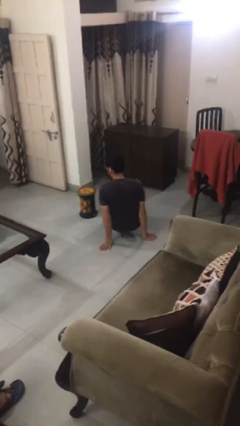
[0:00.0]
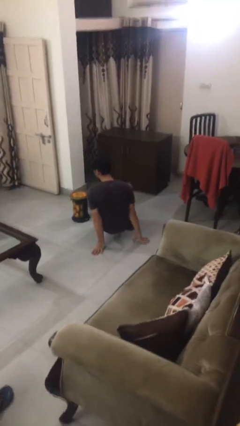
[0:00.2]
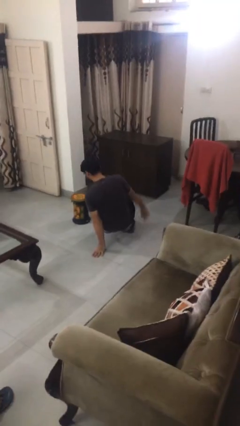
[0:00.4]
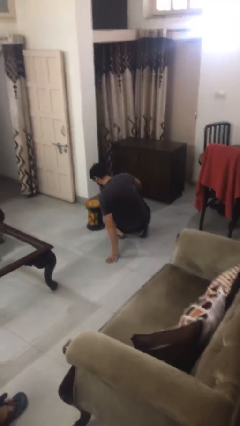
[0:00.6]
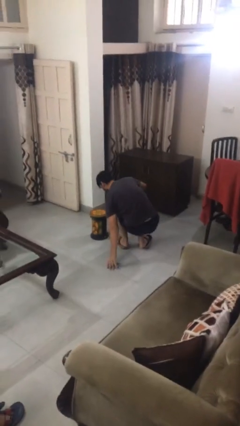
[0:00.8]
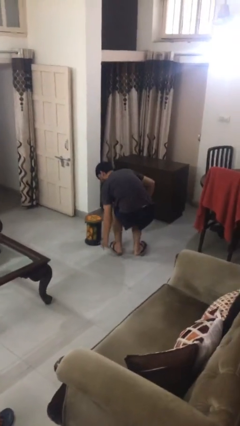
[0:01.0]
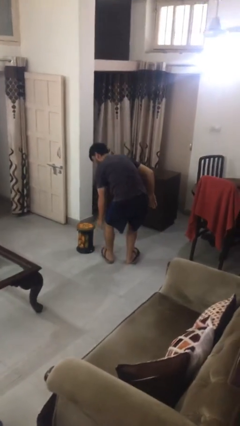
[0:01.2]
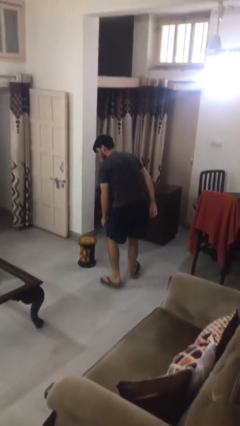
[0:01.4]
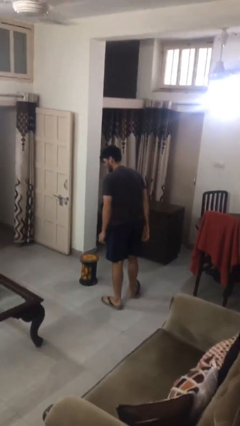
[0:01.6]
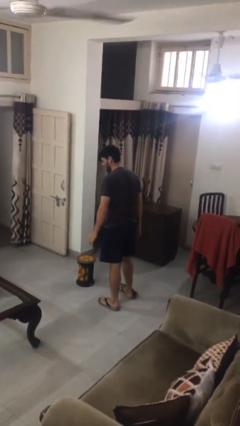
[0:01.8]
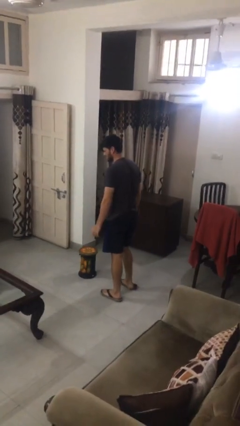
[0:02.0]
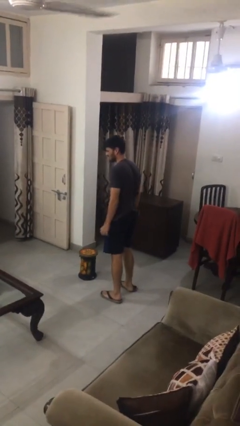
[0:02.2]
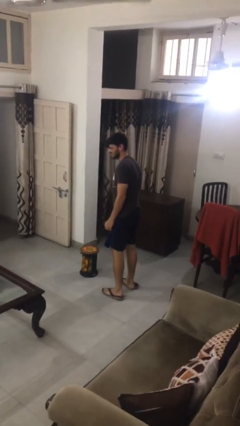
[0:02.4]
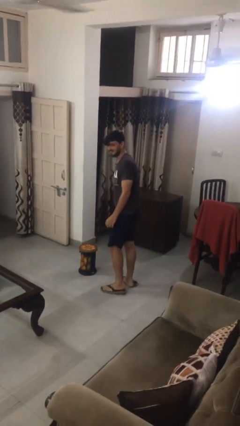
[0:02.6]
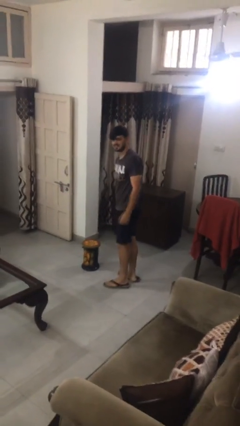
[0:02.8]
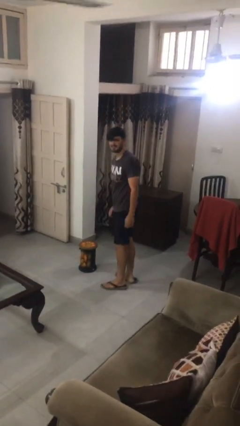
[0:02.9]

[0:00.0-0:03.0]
person stands up from floor

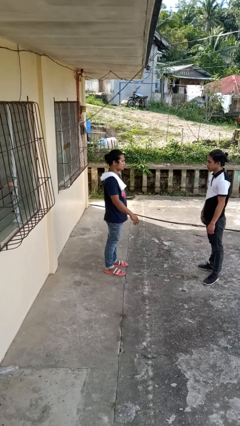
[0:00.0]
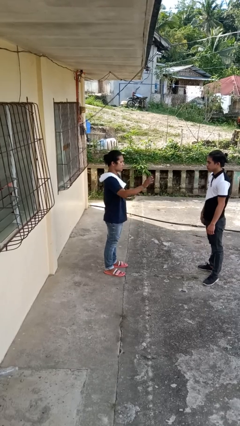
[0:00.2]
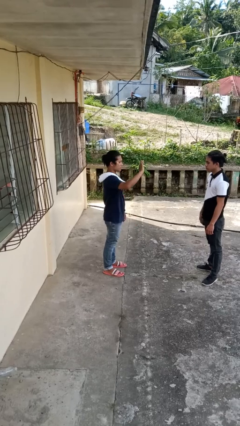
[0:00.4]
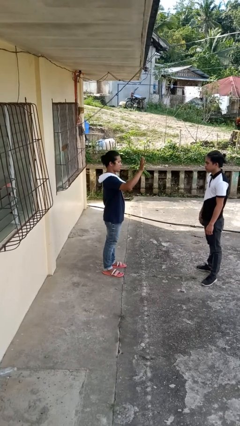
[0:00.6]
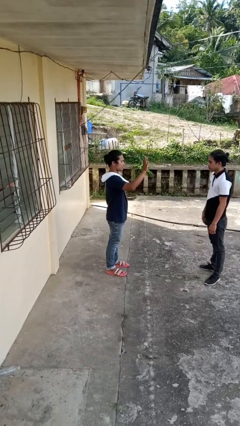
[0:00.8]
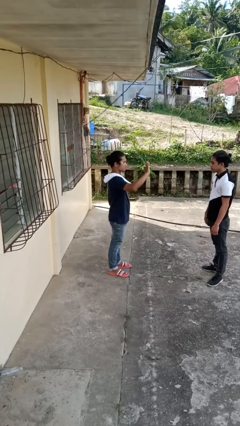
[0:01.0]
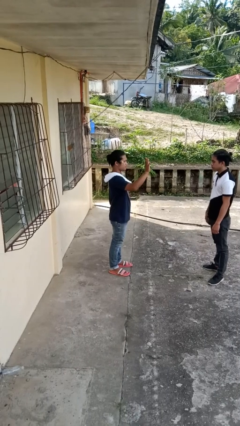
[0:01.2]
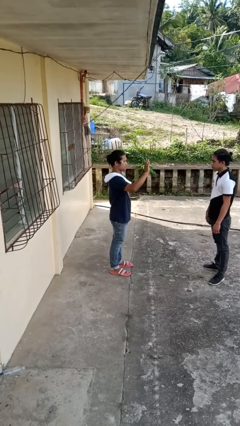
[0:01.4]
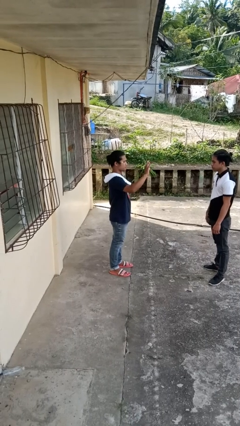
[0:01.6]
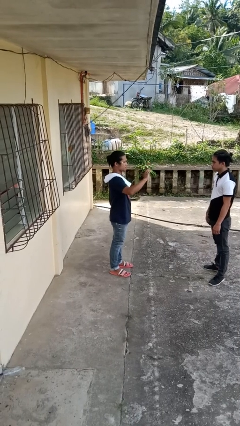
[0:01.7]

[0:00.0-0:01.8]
person waves at person

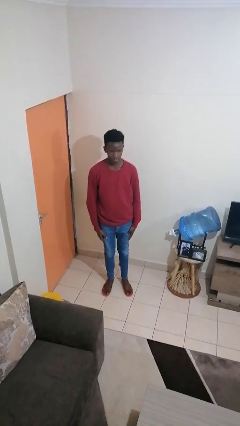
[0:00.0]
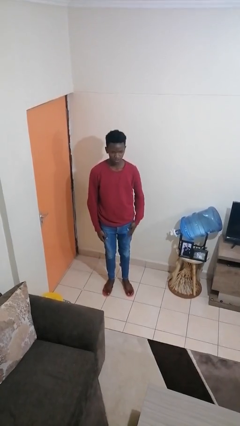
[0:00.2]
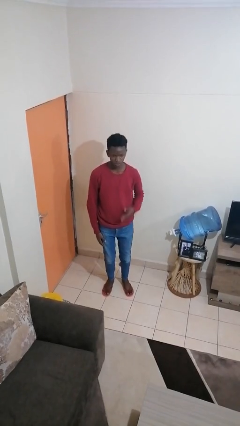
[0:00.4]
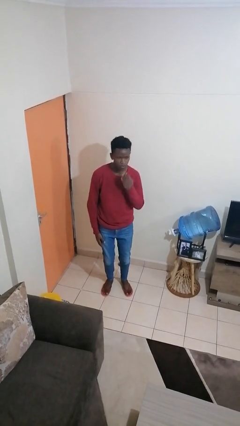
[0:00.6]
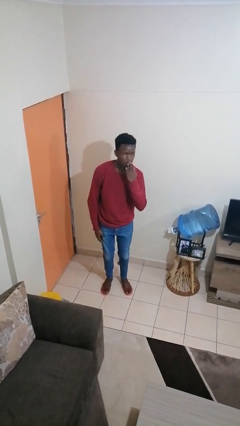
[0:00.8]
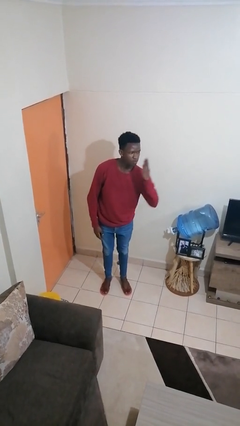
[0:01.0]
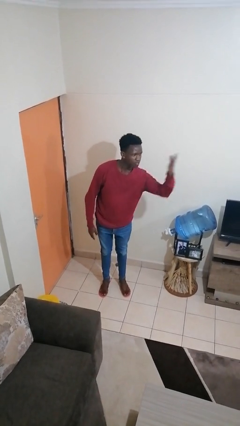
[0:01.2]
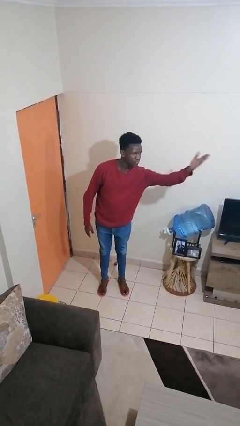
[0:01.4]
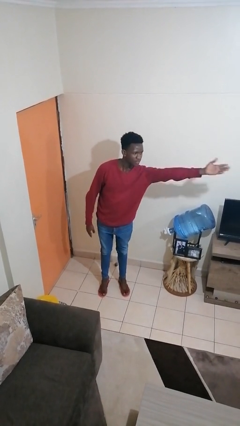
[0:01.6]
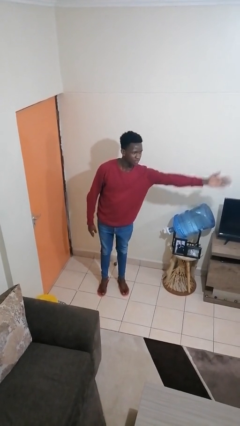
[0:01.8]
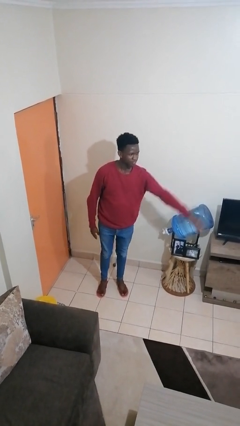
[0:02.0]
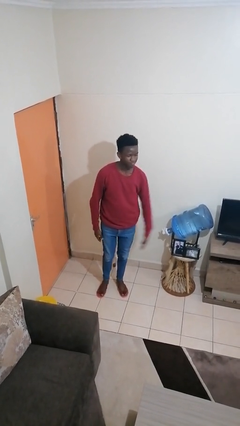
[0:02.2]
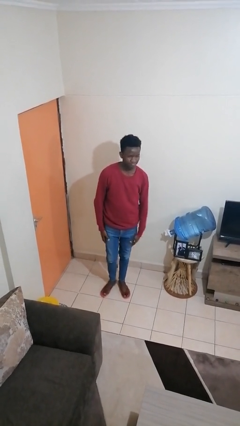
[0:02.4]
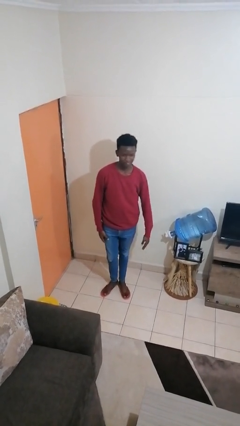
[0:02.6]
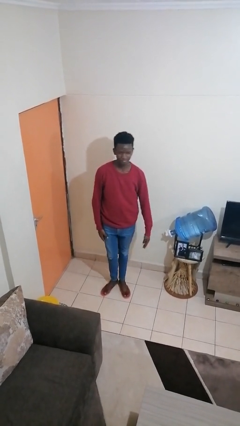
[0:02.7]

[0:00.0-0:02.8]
person gestures blow kiss

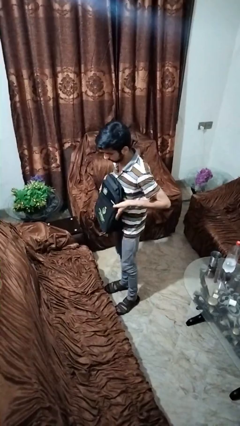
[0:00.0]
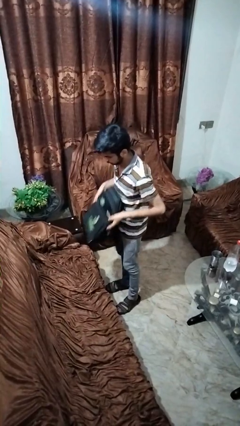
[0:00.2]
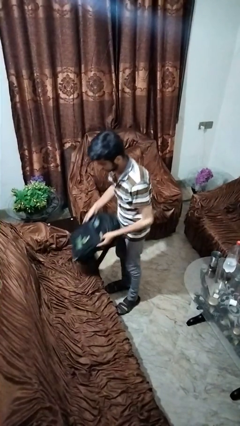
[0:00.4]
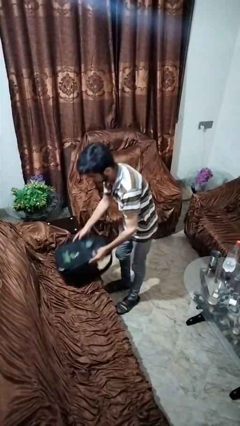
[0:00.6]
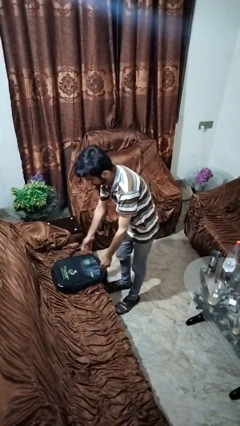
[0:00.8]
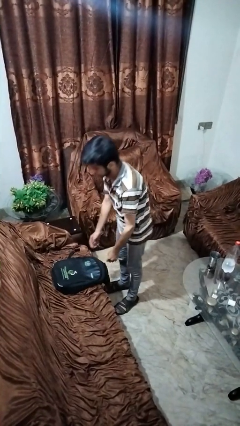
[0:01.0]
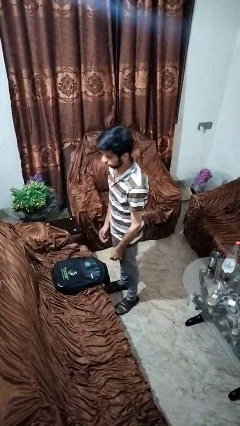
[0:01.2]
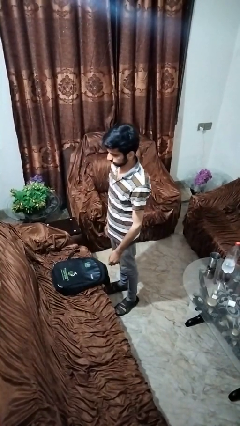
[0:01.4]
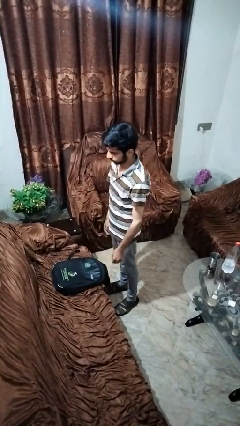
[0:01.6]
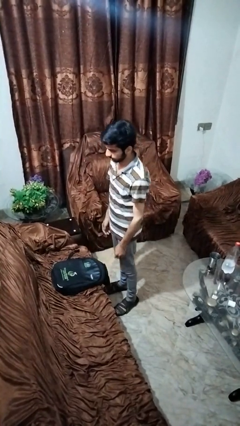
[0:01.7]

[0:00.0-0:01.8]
person puts down object on couch

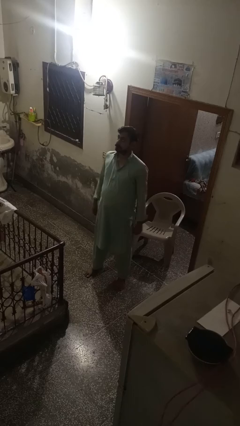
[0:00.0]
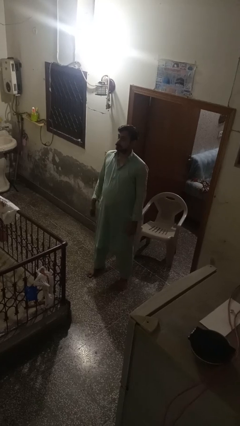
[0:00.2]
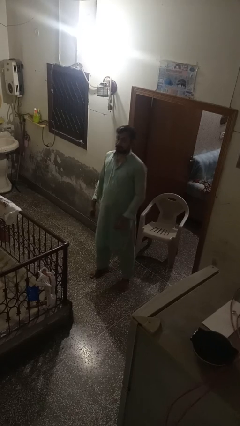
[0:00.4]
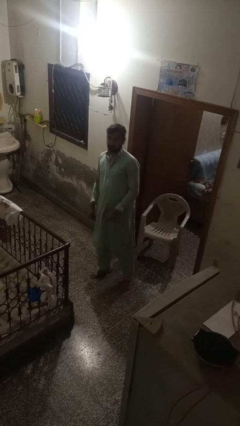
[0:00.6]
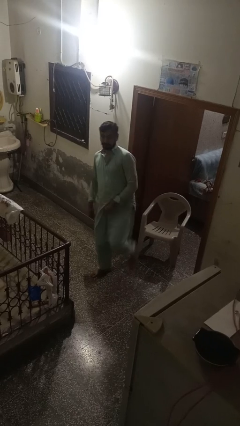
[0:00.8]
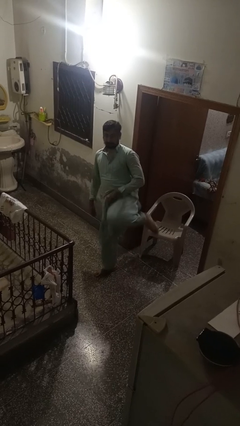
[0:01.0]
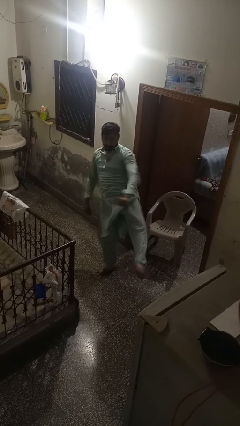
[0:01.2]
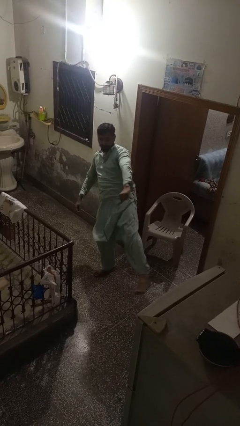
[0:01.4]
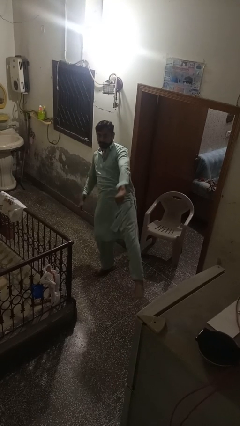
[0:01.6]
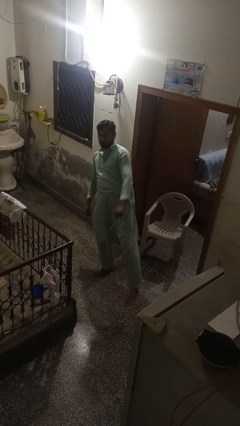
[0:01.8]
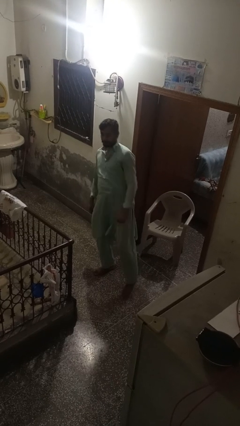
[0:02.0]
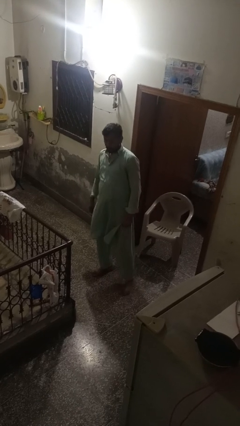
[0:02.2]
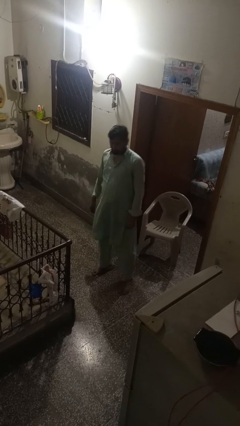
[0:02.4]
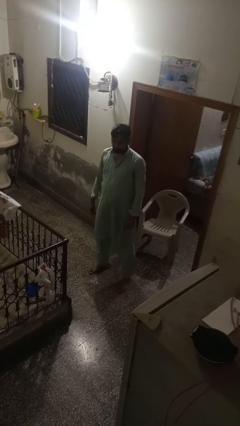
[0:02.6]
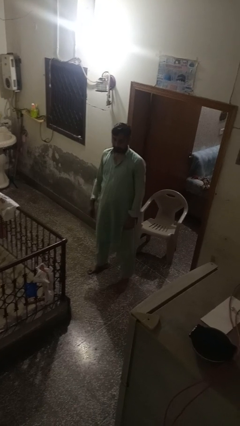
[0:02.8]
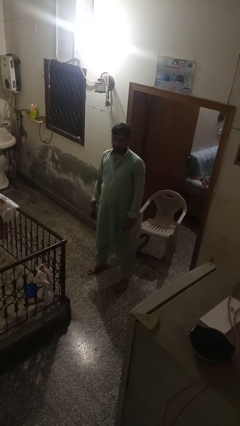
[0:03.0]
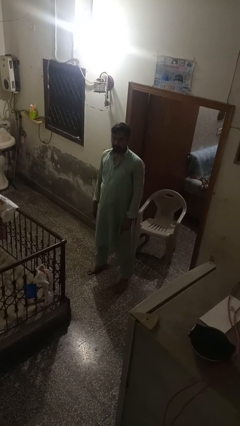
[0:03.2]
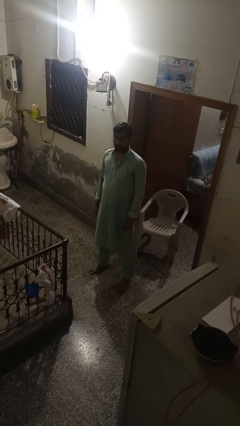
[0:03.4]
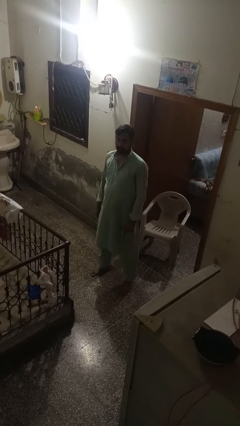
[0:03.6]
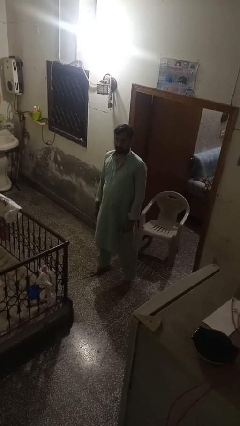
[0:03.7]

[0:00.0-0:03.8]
person karate kicks

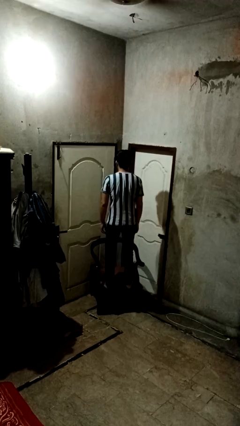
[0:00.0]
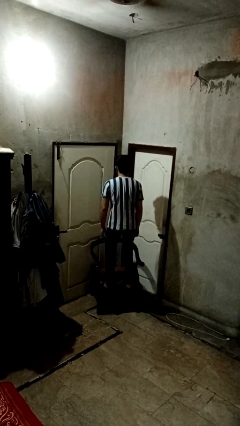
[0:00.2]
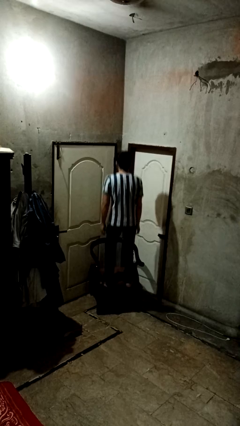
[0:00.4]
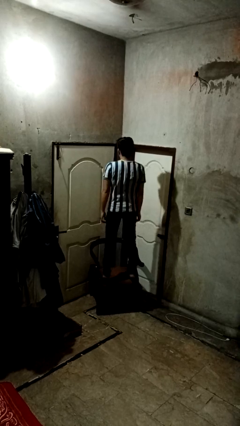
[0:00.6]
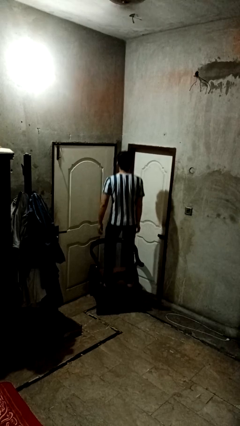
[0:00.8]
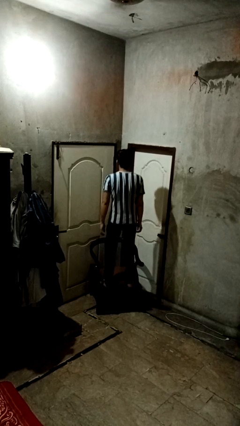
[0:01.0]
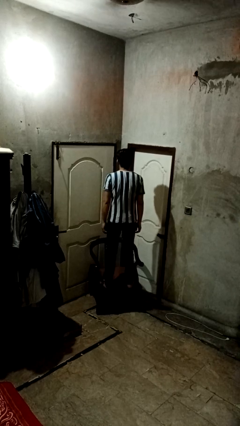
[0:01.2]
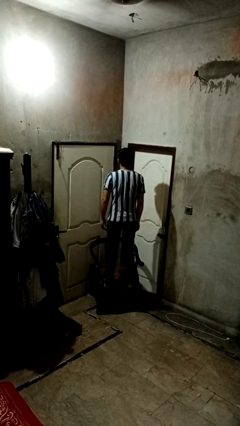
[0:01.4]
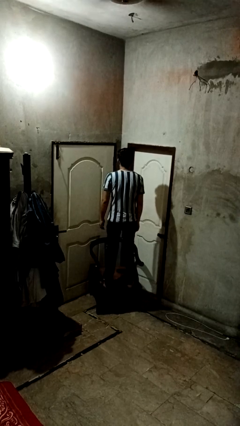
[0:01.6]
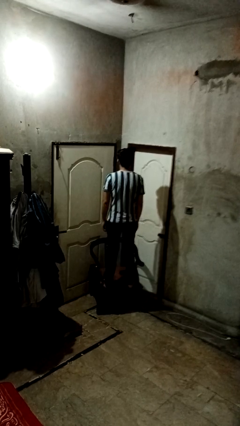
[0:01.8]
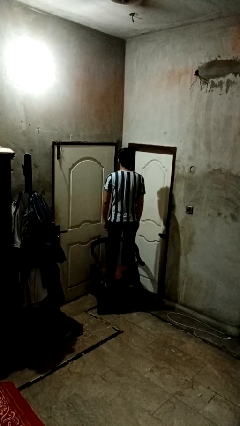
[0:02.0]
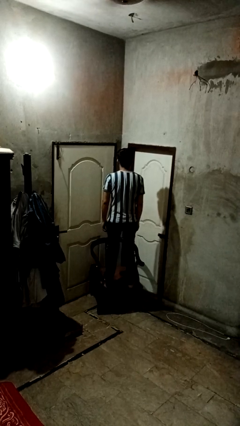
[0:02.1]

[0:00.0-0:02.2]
person jumps on couch

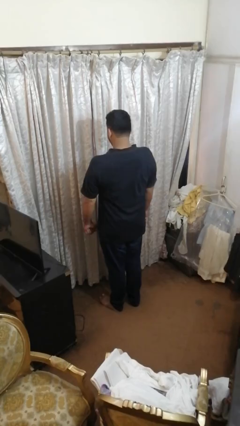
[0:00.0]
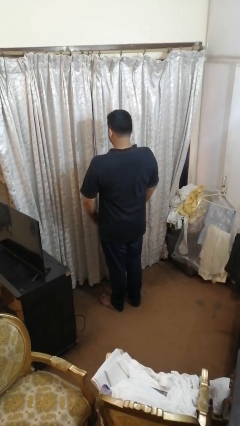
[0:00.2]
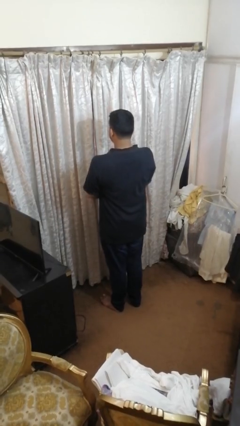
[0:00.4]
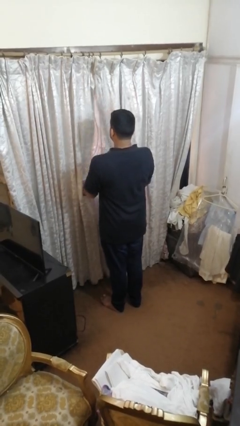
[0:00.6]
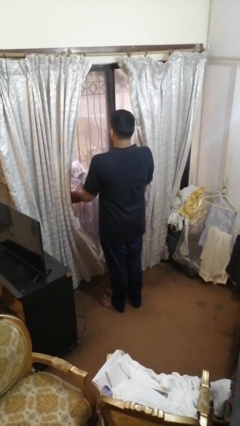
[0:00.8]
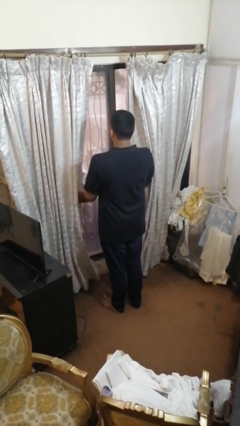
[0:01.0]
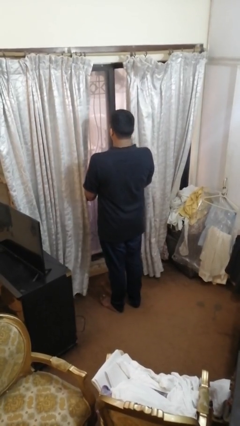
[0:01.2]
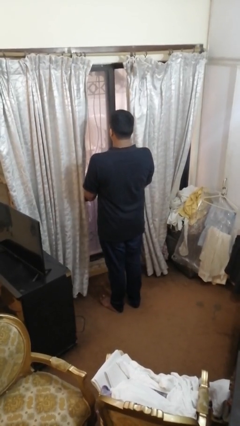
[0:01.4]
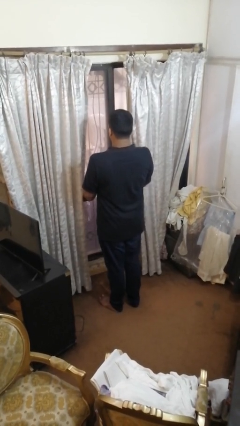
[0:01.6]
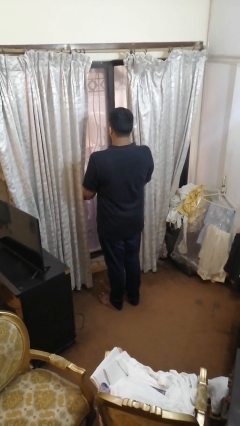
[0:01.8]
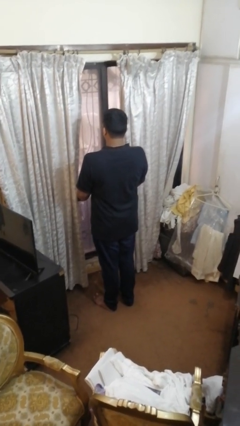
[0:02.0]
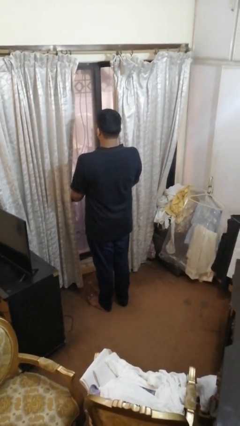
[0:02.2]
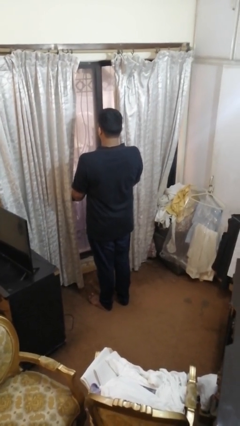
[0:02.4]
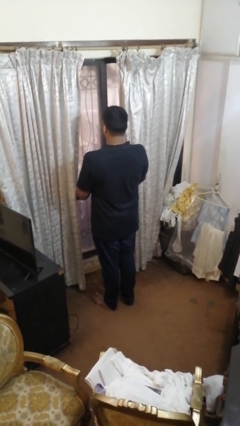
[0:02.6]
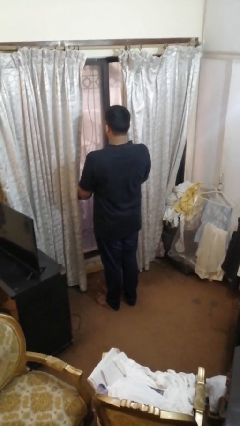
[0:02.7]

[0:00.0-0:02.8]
person opens curtains
